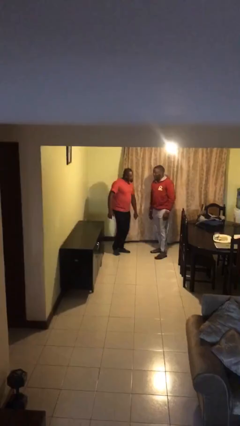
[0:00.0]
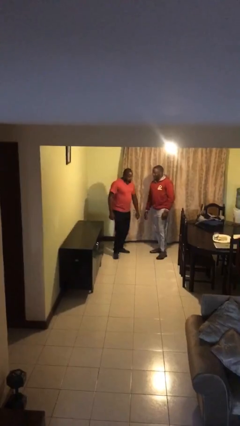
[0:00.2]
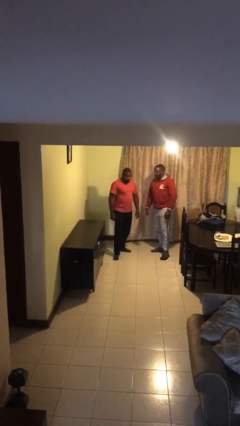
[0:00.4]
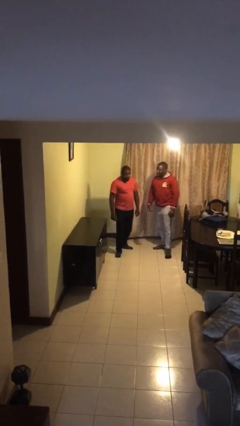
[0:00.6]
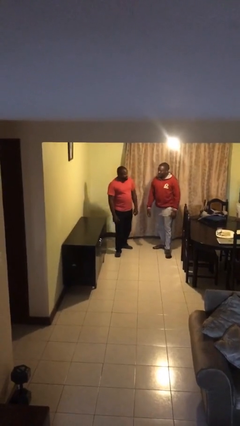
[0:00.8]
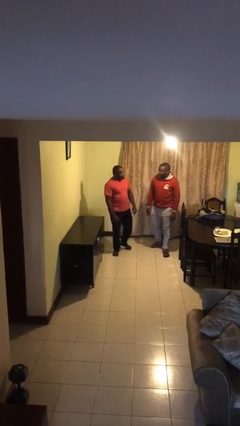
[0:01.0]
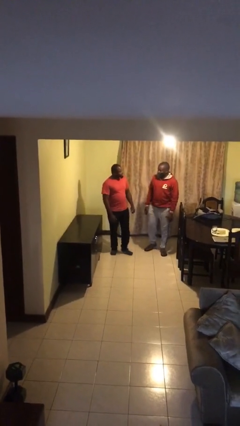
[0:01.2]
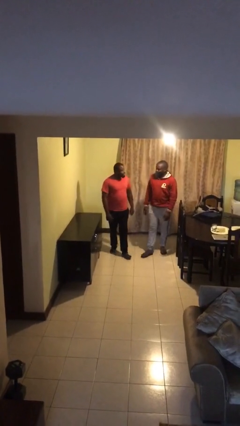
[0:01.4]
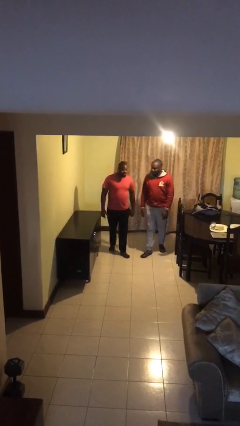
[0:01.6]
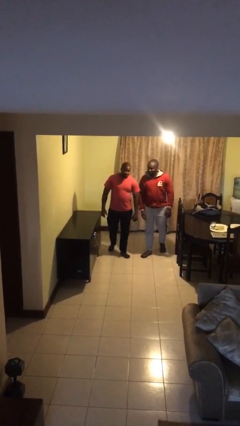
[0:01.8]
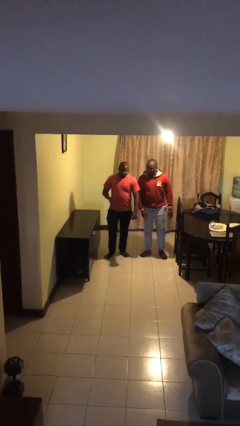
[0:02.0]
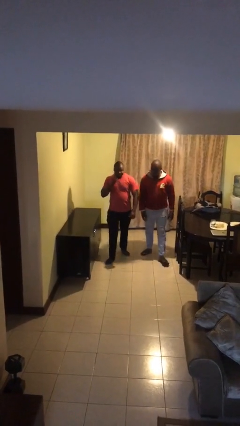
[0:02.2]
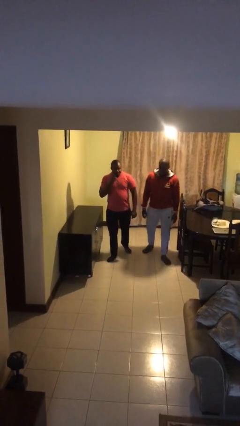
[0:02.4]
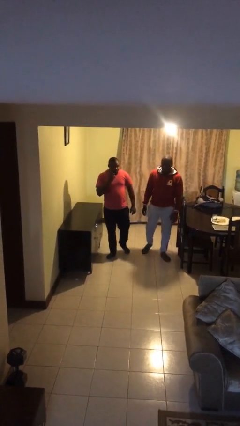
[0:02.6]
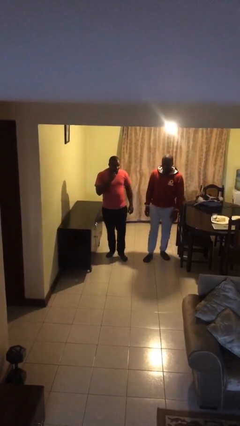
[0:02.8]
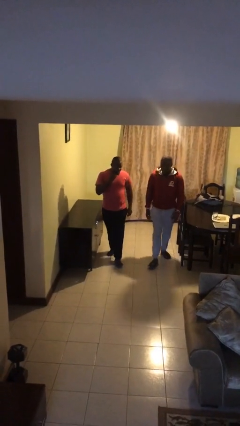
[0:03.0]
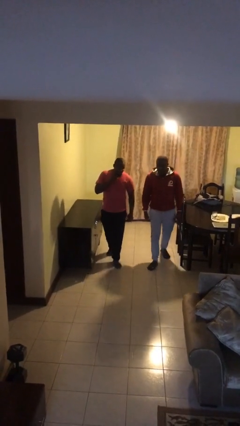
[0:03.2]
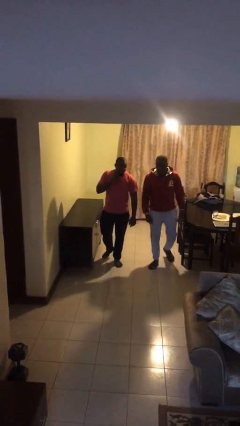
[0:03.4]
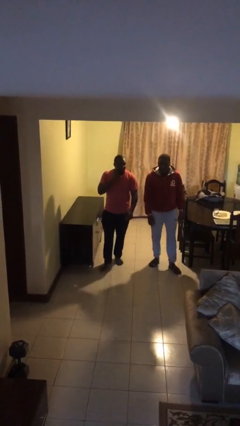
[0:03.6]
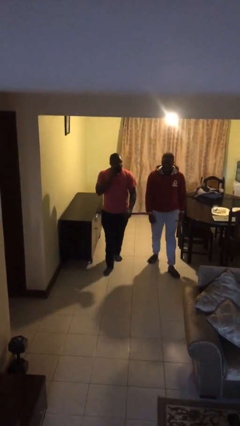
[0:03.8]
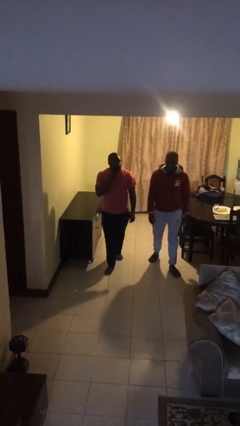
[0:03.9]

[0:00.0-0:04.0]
person talks to person

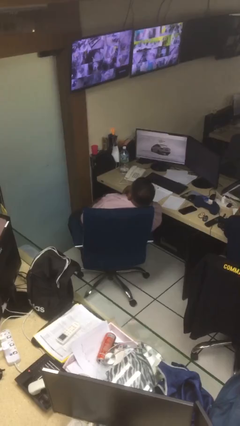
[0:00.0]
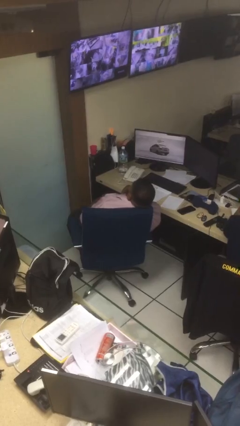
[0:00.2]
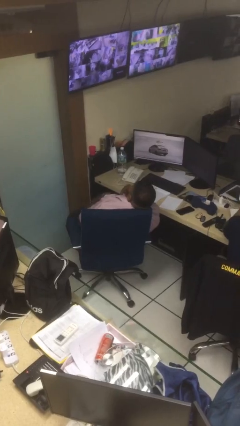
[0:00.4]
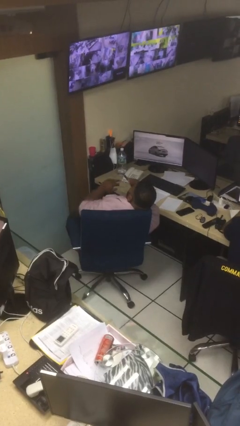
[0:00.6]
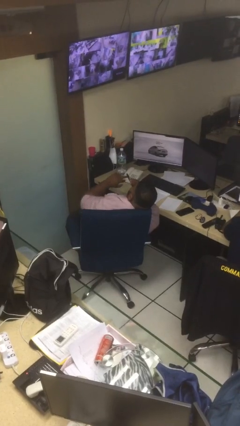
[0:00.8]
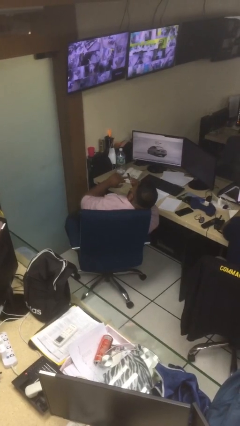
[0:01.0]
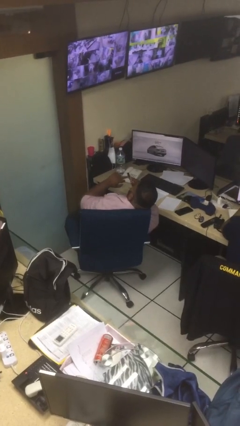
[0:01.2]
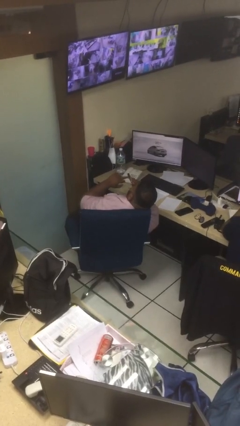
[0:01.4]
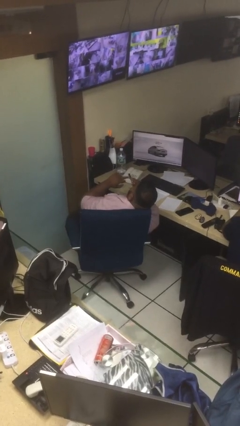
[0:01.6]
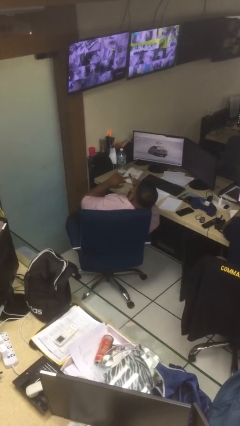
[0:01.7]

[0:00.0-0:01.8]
person files fingernails

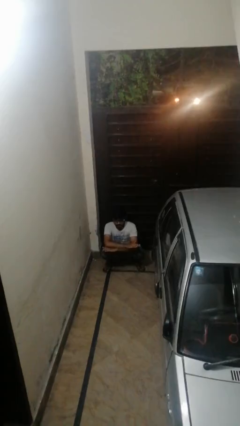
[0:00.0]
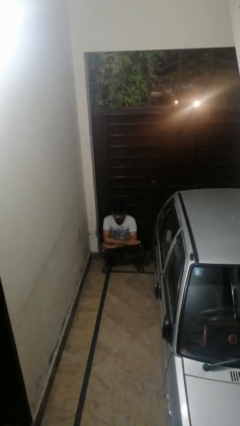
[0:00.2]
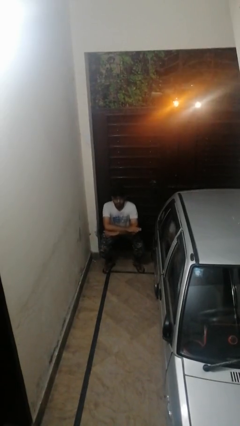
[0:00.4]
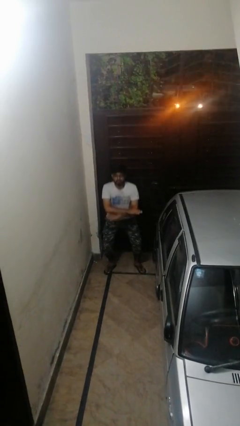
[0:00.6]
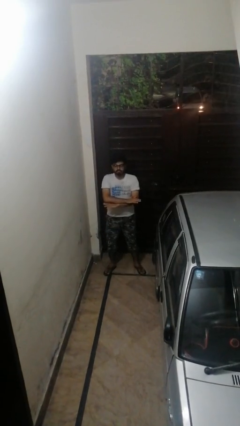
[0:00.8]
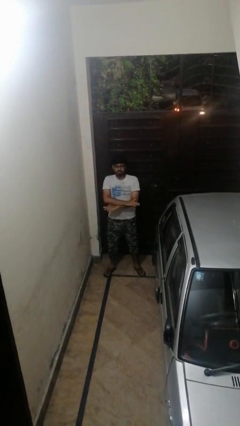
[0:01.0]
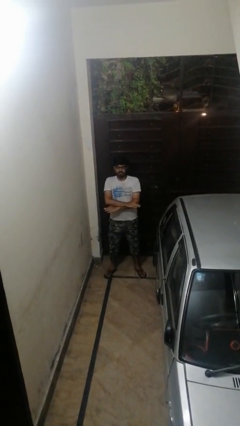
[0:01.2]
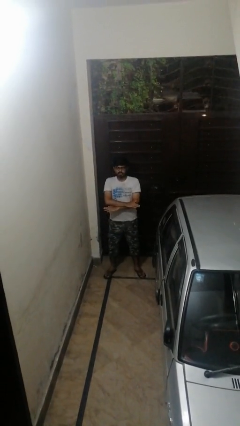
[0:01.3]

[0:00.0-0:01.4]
person stands up

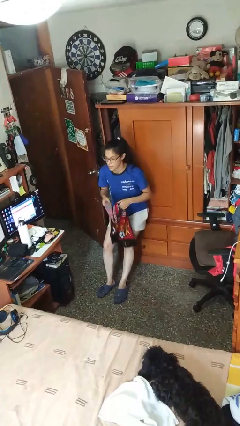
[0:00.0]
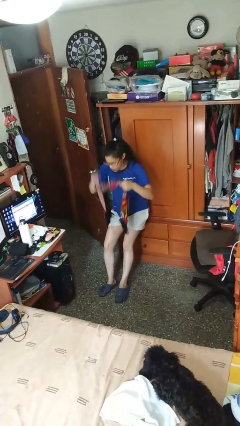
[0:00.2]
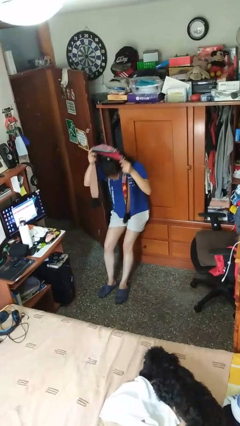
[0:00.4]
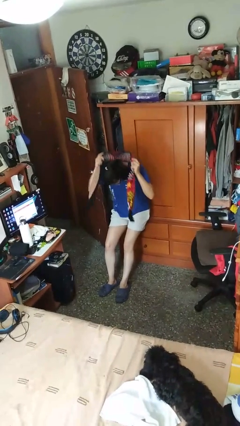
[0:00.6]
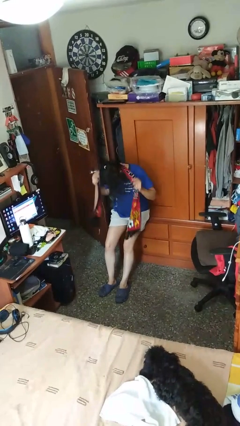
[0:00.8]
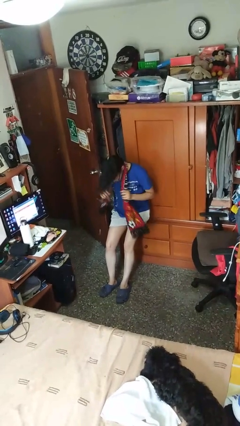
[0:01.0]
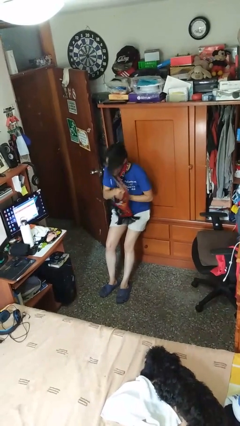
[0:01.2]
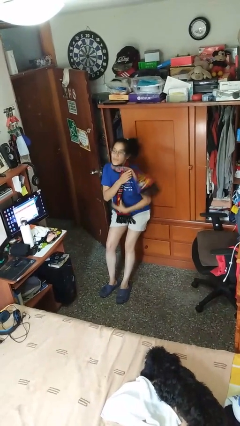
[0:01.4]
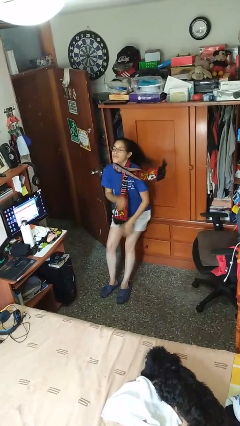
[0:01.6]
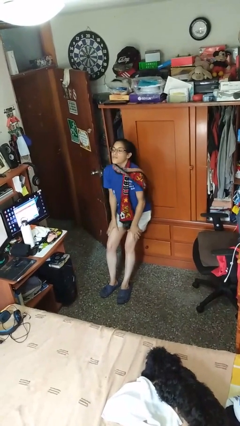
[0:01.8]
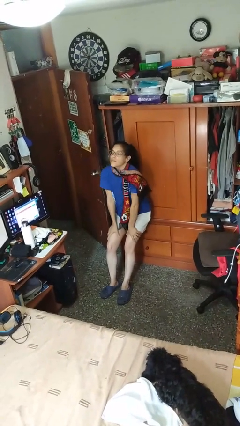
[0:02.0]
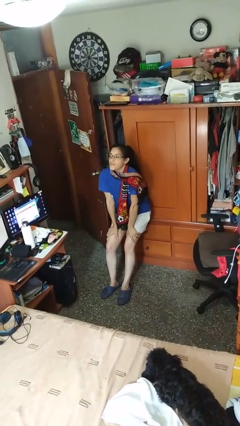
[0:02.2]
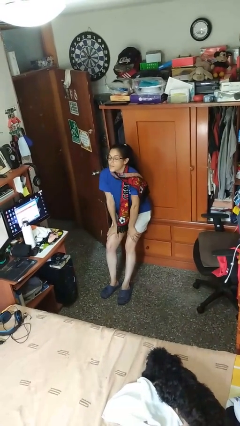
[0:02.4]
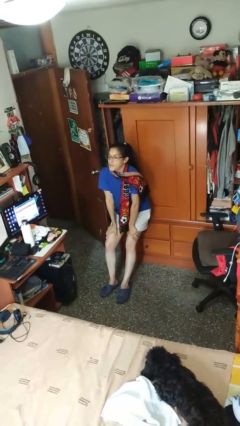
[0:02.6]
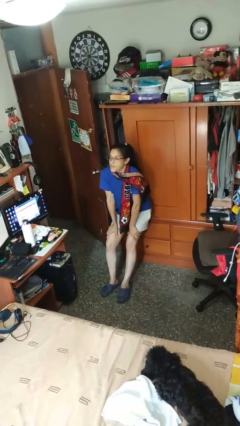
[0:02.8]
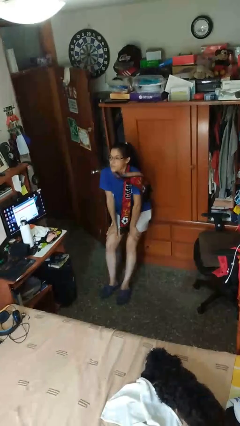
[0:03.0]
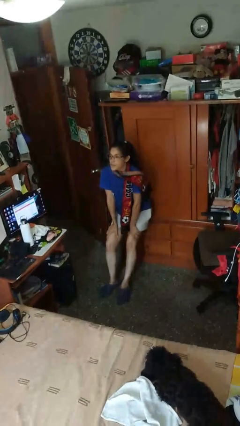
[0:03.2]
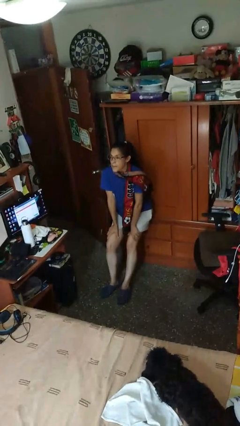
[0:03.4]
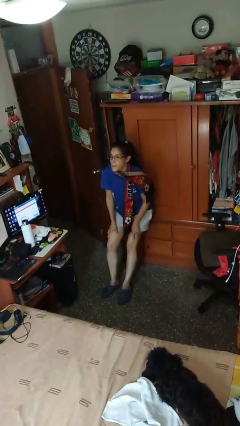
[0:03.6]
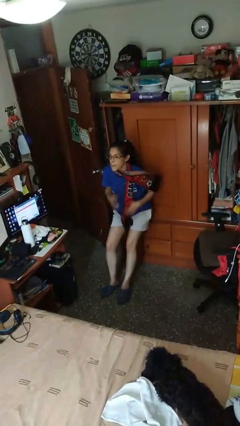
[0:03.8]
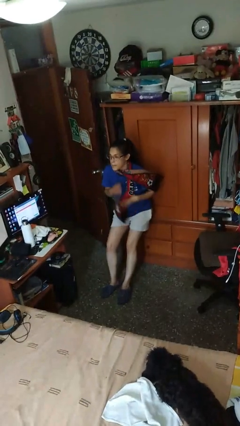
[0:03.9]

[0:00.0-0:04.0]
person puts on scarf

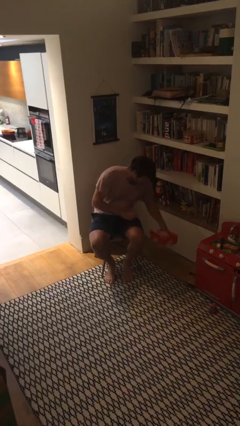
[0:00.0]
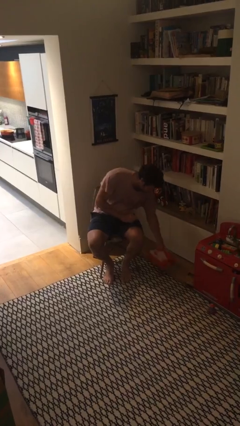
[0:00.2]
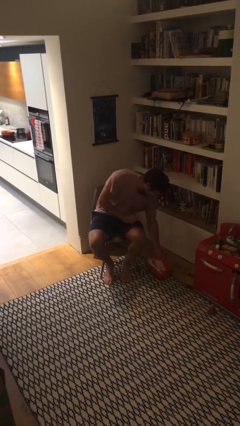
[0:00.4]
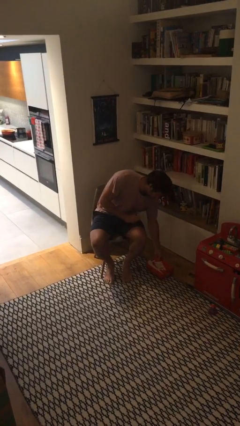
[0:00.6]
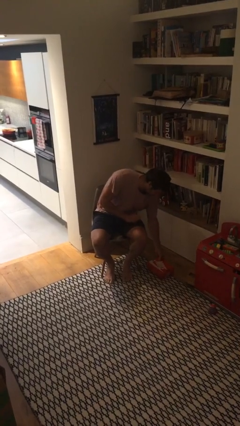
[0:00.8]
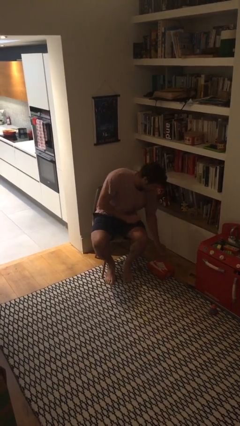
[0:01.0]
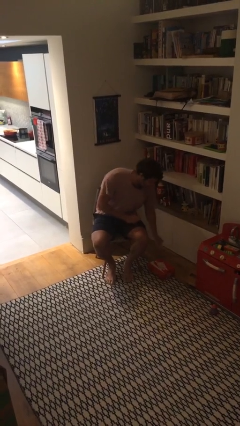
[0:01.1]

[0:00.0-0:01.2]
person puts down object on floor

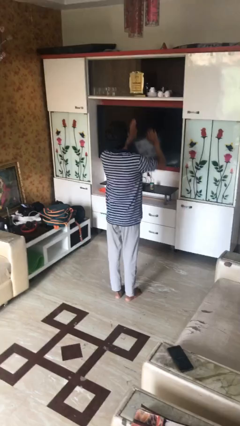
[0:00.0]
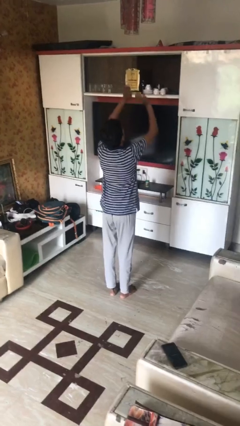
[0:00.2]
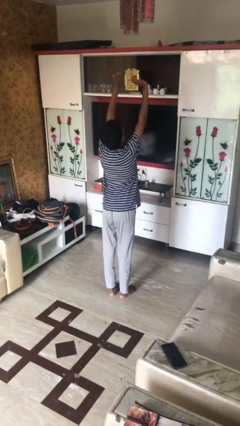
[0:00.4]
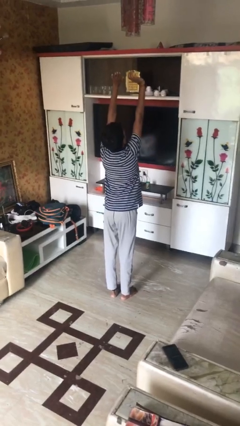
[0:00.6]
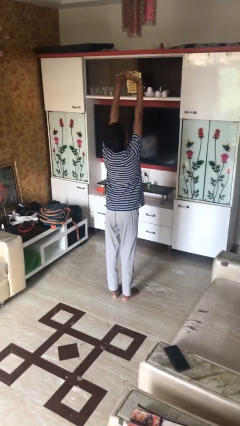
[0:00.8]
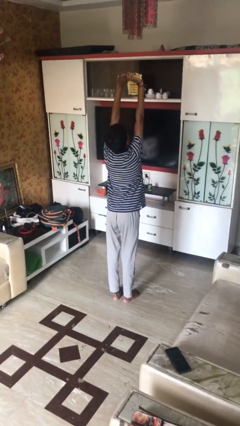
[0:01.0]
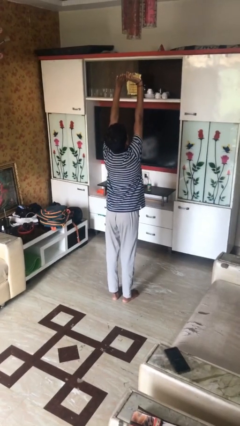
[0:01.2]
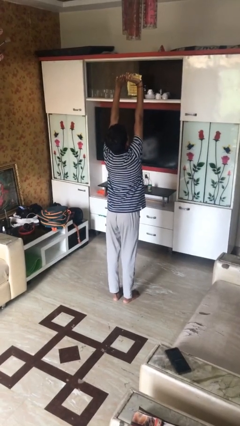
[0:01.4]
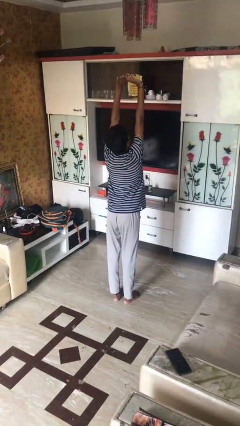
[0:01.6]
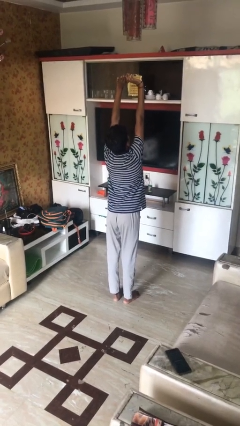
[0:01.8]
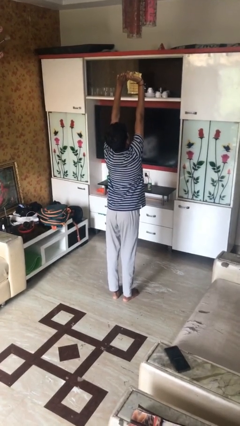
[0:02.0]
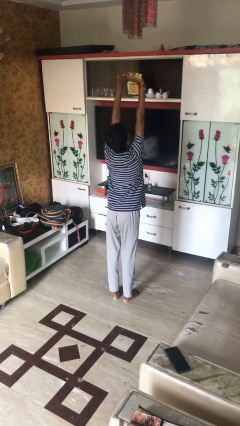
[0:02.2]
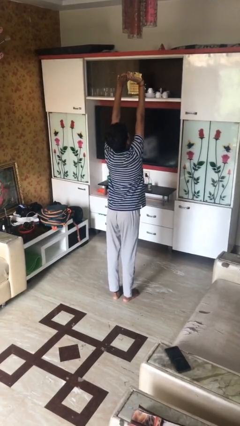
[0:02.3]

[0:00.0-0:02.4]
person stretches arms over head

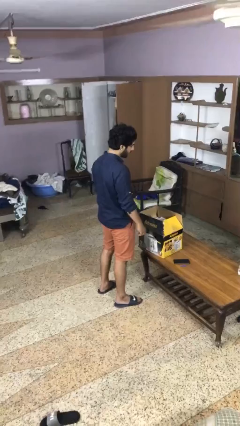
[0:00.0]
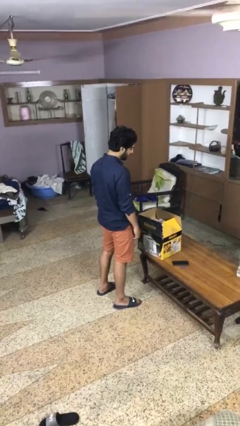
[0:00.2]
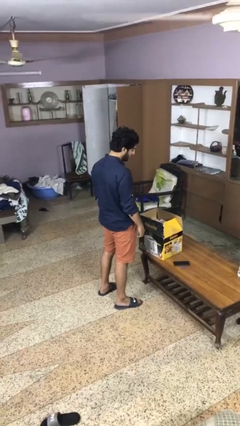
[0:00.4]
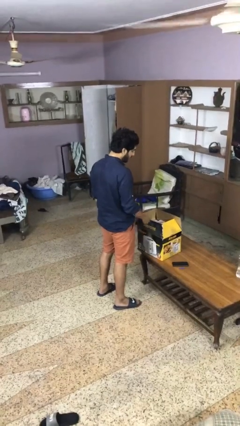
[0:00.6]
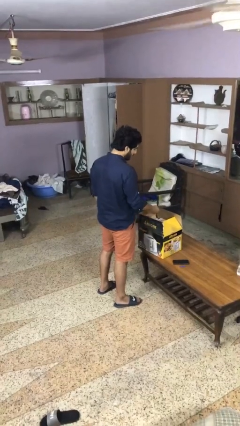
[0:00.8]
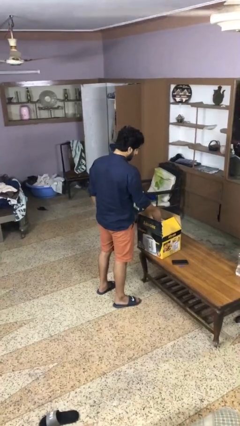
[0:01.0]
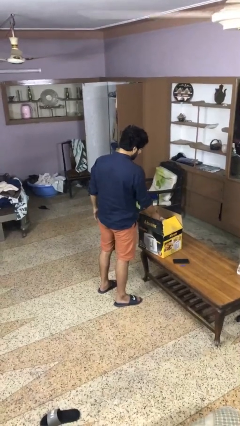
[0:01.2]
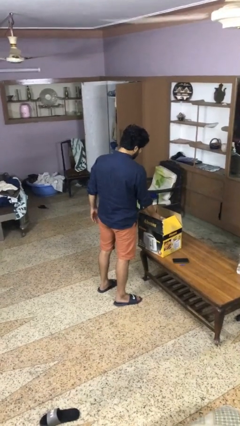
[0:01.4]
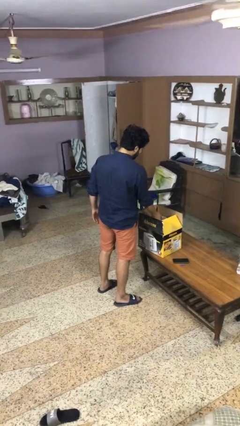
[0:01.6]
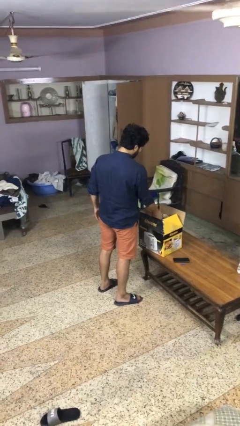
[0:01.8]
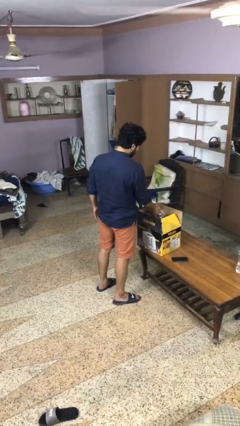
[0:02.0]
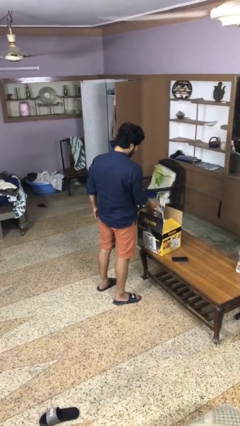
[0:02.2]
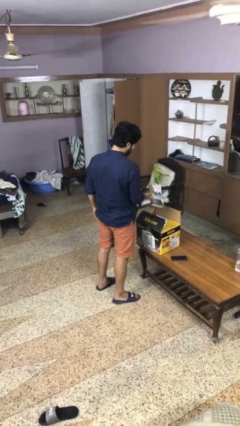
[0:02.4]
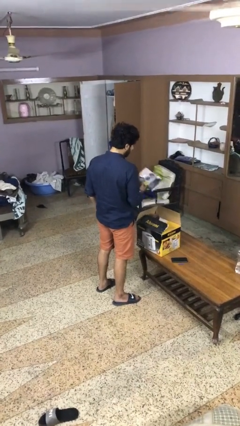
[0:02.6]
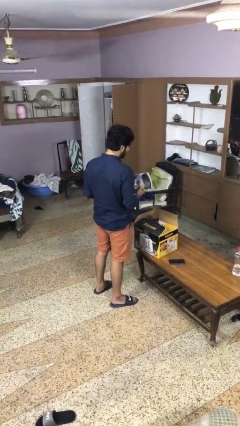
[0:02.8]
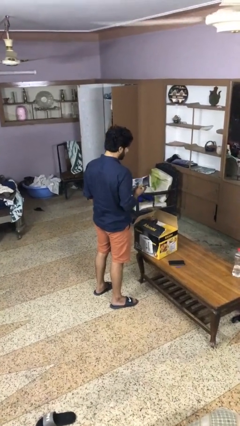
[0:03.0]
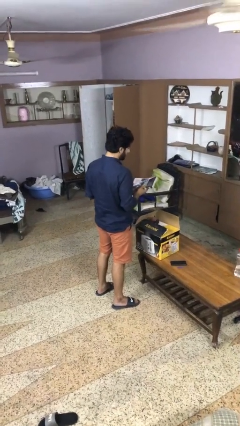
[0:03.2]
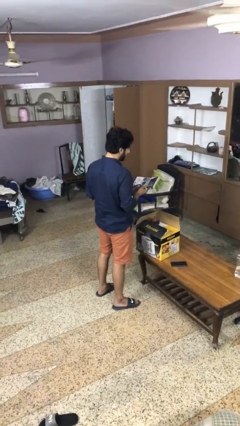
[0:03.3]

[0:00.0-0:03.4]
person takes object from box
